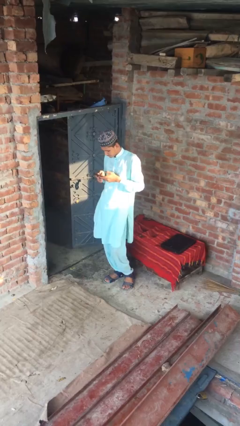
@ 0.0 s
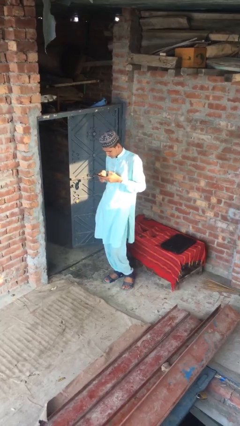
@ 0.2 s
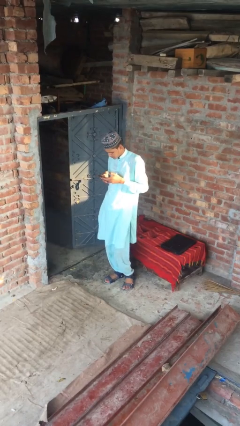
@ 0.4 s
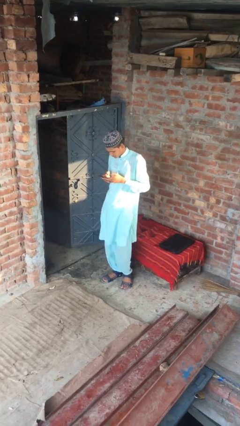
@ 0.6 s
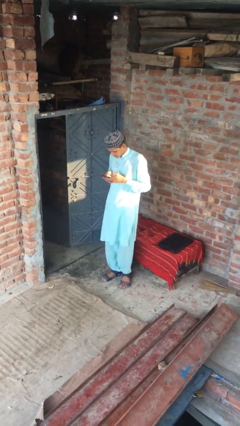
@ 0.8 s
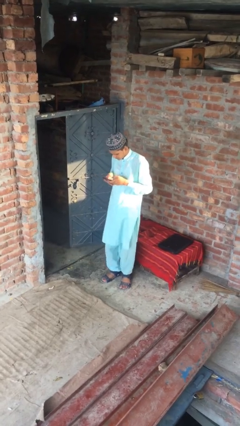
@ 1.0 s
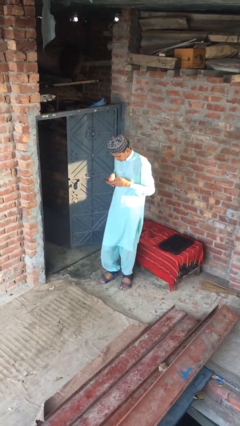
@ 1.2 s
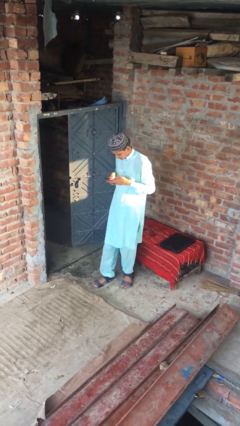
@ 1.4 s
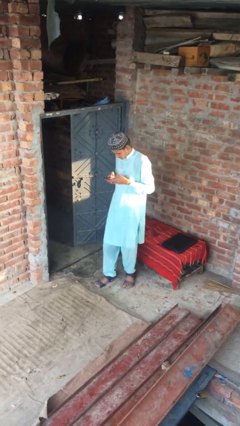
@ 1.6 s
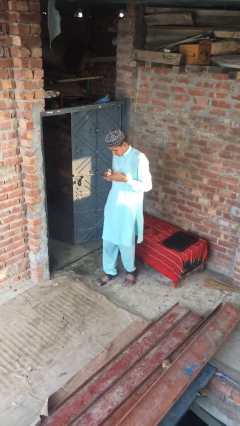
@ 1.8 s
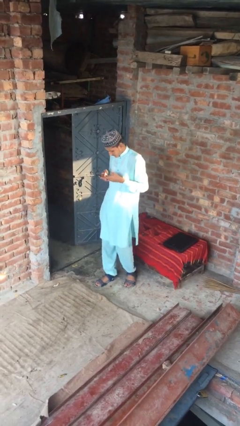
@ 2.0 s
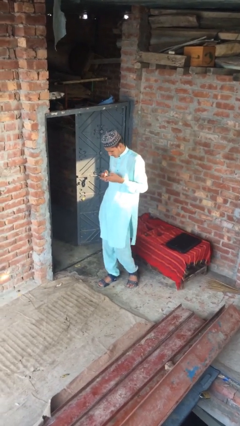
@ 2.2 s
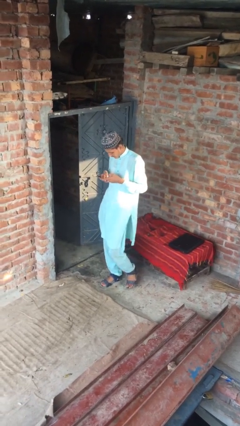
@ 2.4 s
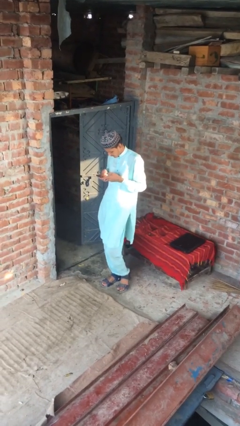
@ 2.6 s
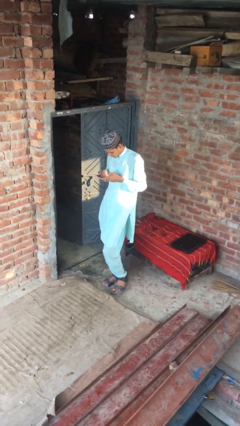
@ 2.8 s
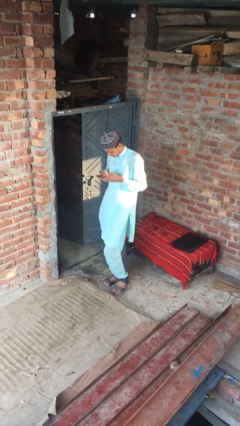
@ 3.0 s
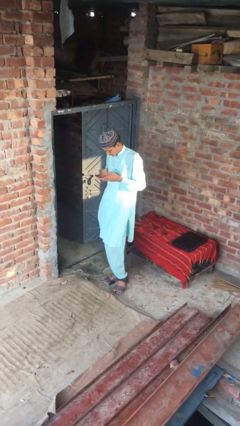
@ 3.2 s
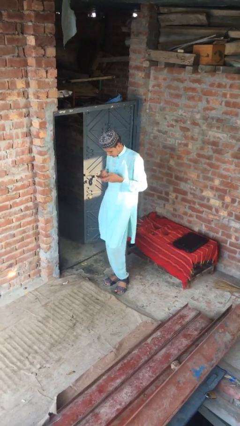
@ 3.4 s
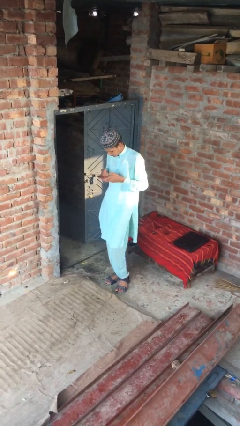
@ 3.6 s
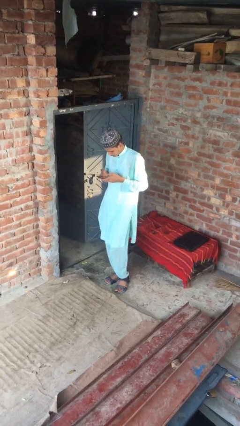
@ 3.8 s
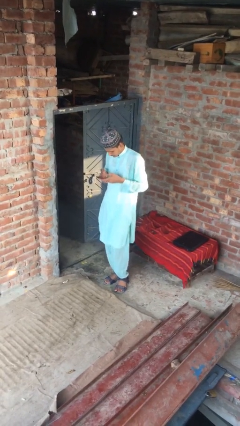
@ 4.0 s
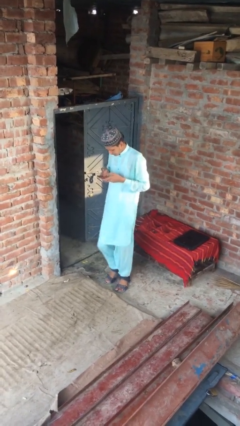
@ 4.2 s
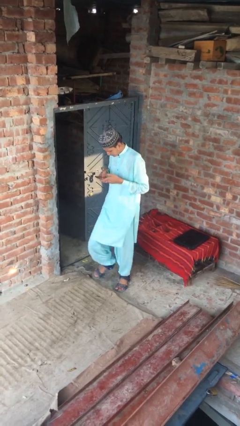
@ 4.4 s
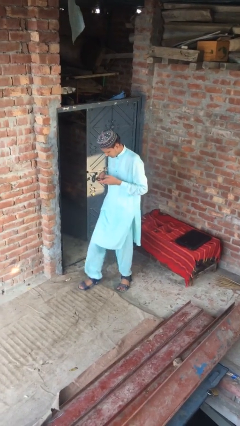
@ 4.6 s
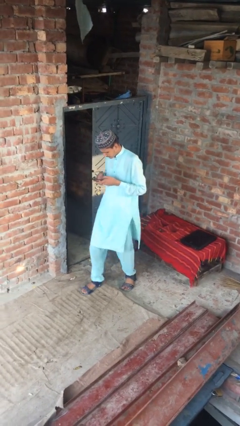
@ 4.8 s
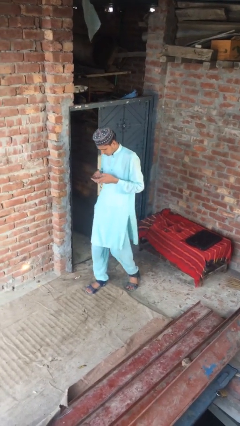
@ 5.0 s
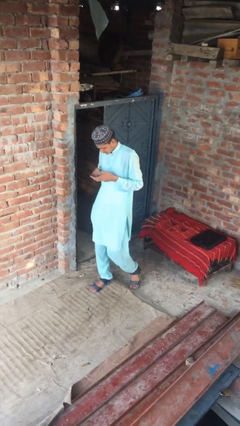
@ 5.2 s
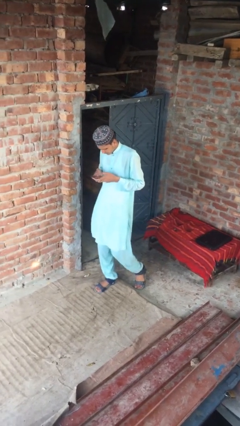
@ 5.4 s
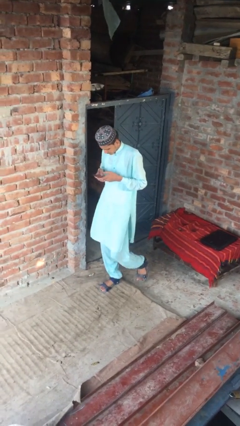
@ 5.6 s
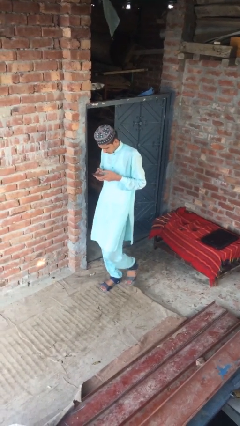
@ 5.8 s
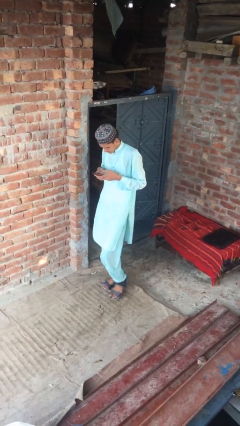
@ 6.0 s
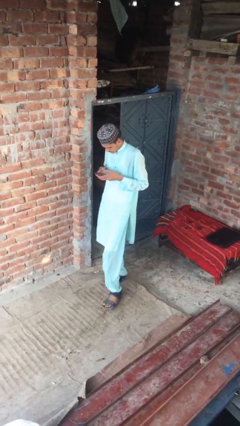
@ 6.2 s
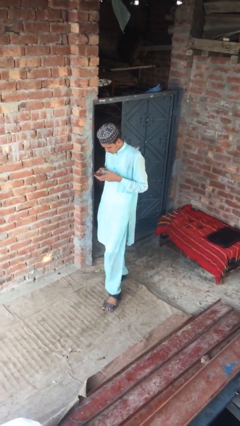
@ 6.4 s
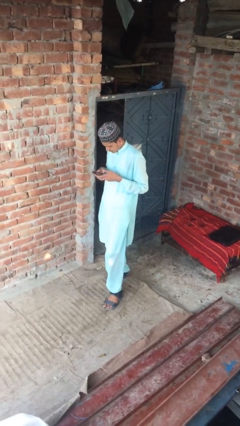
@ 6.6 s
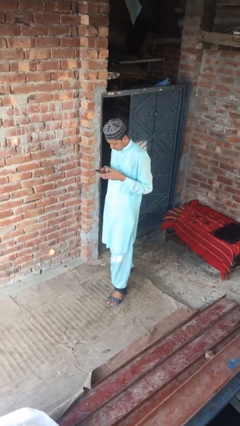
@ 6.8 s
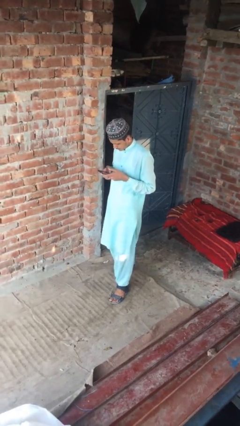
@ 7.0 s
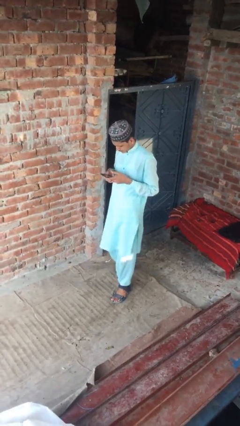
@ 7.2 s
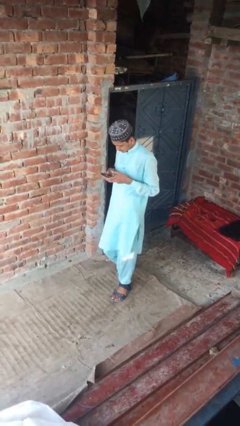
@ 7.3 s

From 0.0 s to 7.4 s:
person texts on phone

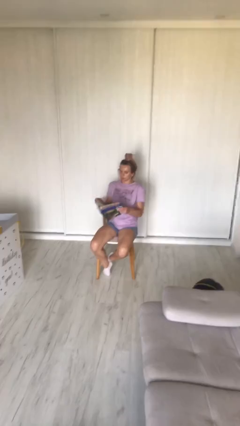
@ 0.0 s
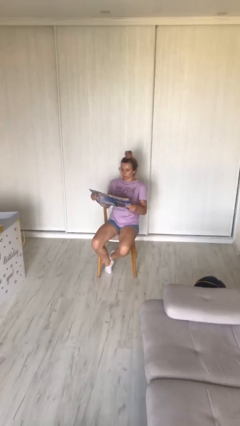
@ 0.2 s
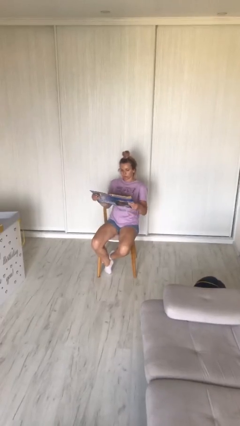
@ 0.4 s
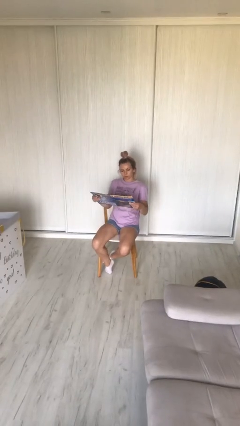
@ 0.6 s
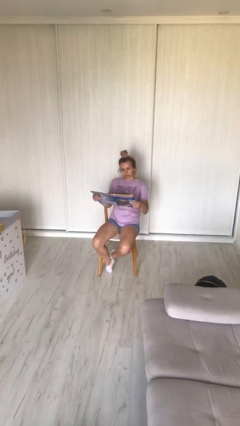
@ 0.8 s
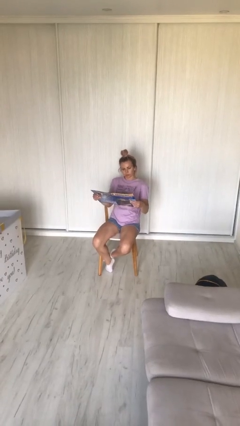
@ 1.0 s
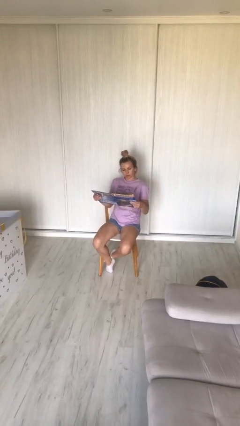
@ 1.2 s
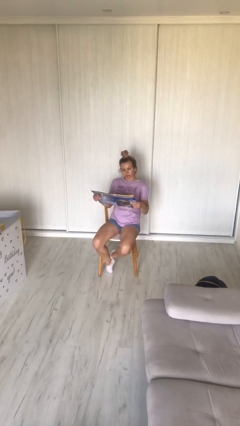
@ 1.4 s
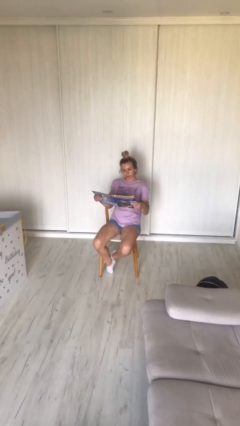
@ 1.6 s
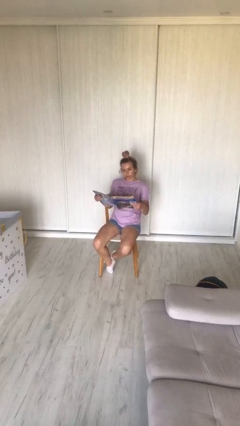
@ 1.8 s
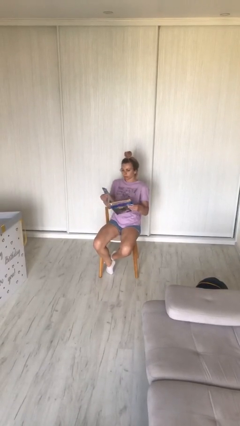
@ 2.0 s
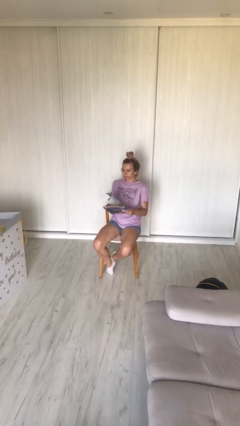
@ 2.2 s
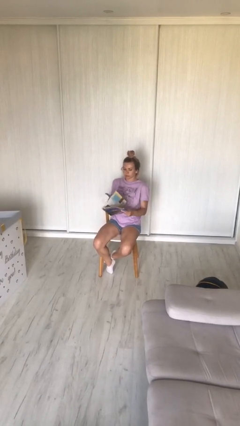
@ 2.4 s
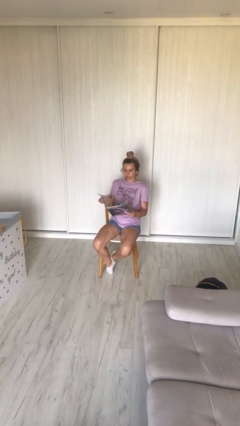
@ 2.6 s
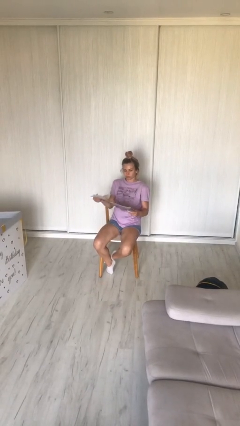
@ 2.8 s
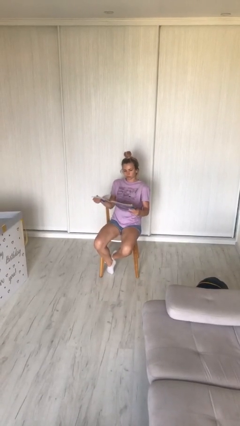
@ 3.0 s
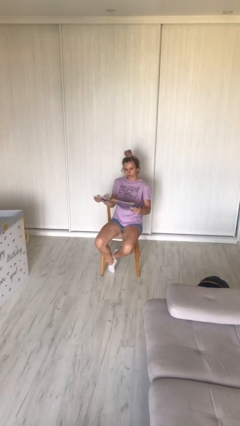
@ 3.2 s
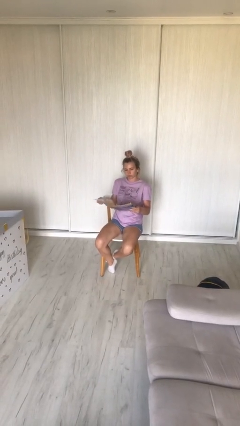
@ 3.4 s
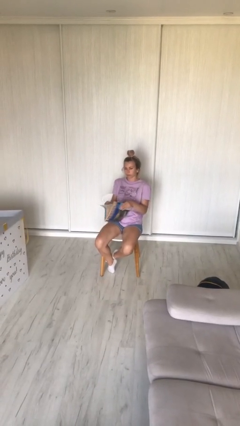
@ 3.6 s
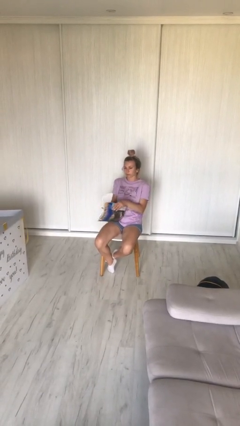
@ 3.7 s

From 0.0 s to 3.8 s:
person reads magazine

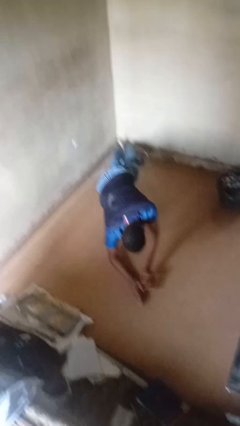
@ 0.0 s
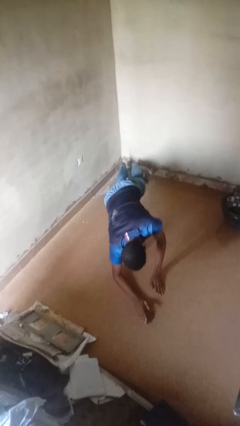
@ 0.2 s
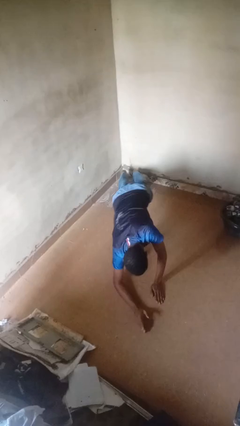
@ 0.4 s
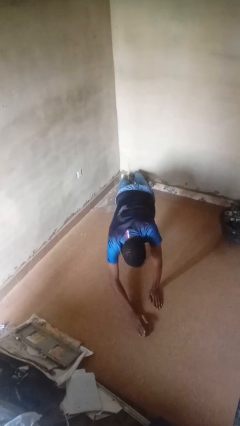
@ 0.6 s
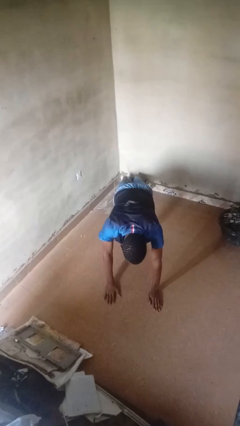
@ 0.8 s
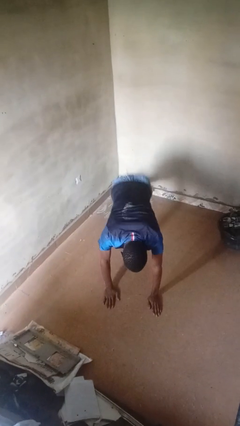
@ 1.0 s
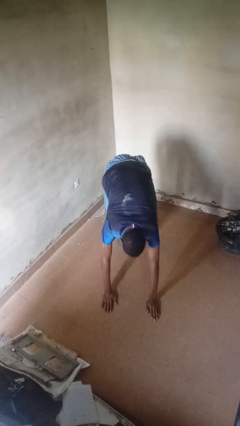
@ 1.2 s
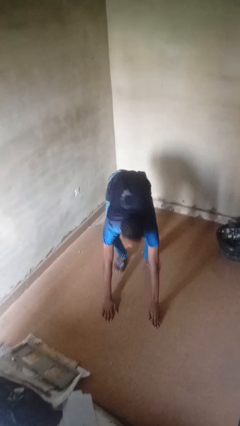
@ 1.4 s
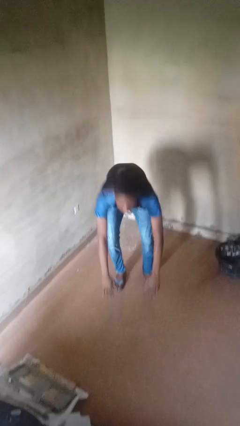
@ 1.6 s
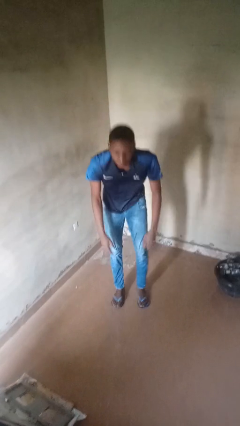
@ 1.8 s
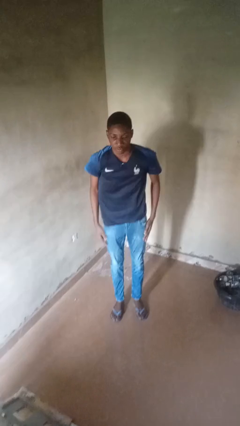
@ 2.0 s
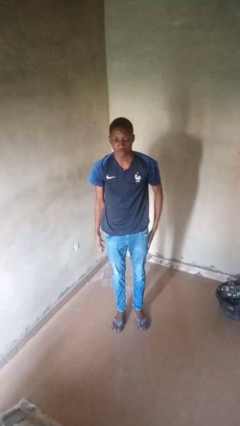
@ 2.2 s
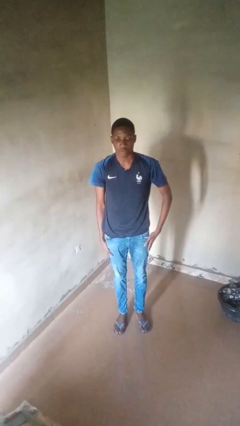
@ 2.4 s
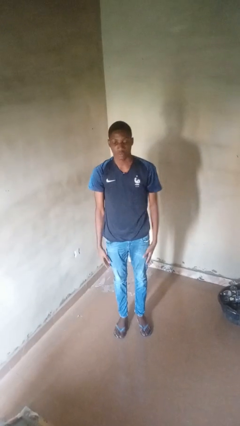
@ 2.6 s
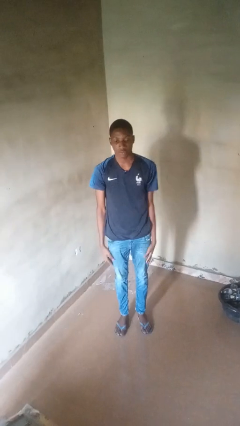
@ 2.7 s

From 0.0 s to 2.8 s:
person stands up from floor

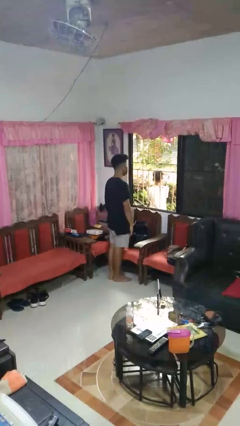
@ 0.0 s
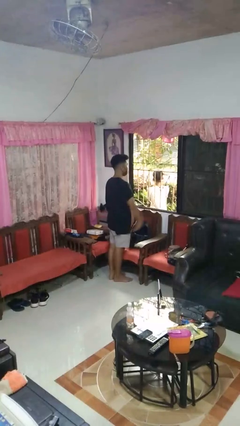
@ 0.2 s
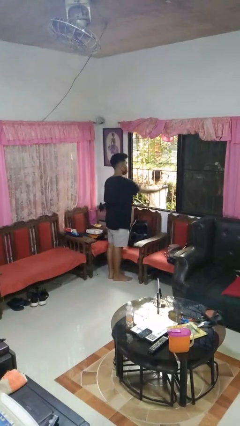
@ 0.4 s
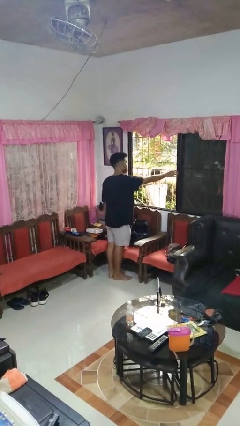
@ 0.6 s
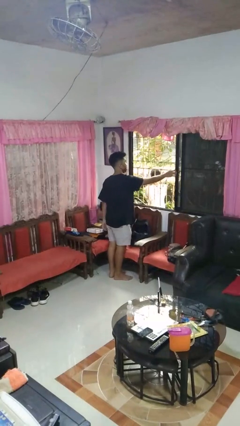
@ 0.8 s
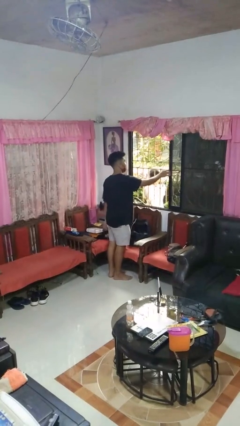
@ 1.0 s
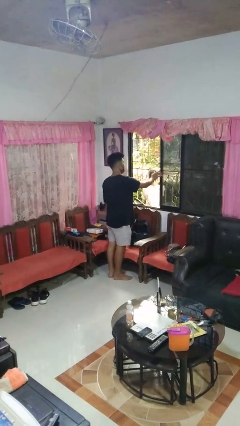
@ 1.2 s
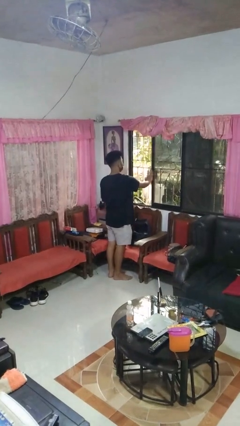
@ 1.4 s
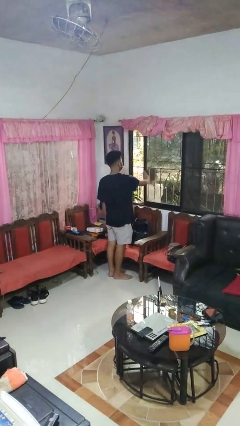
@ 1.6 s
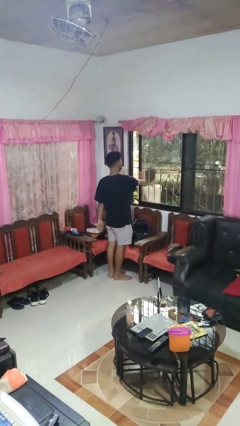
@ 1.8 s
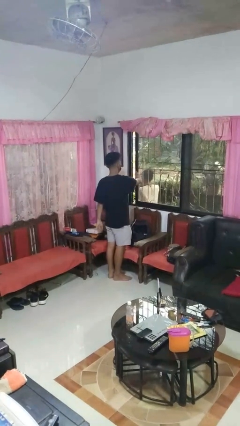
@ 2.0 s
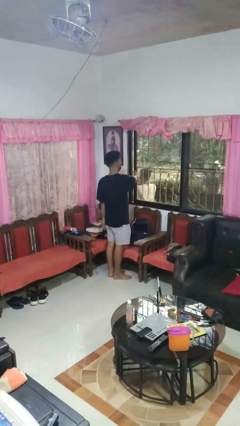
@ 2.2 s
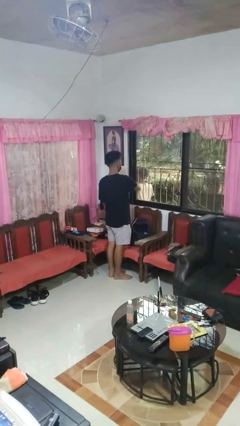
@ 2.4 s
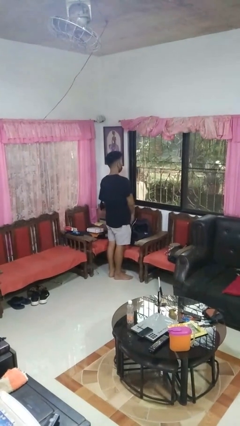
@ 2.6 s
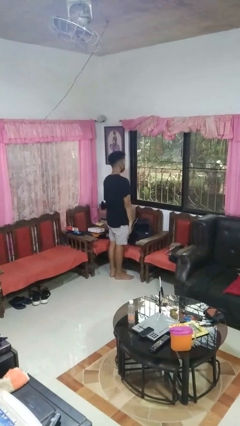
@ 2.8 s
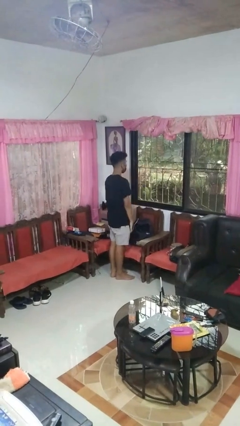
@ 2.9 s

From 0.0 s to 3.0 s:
person closes home window

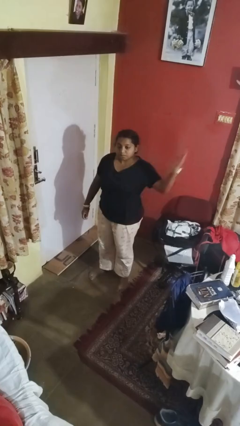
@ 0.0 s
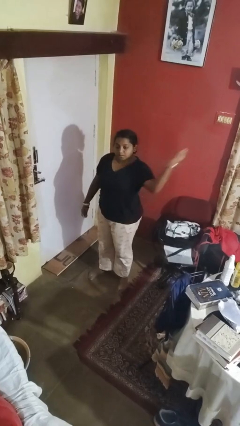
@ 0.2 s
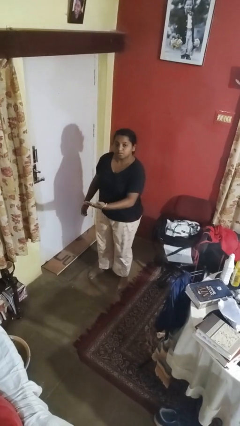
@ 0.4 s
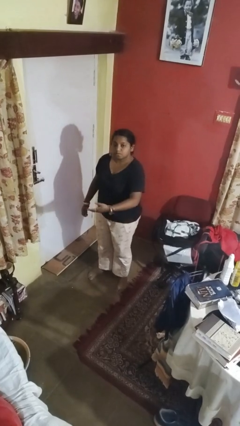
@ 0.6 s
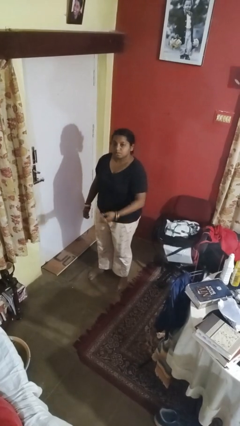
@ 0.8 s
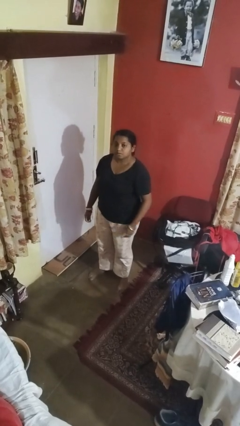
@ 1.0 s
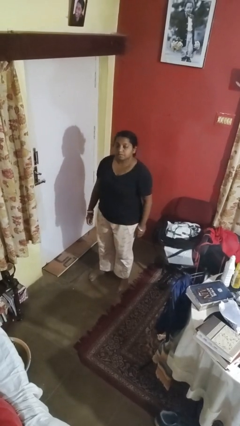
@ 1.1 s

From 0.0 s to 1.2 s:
person karate chop
